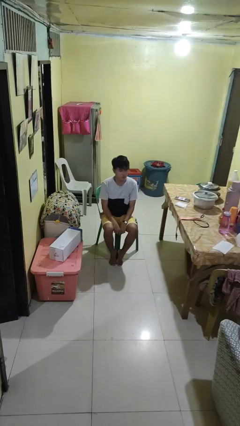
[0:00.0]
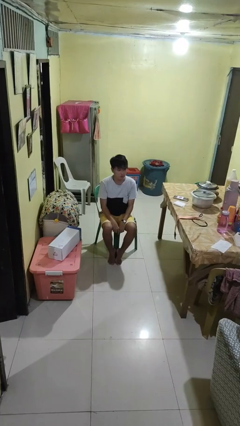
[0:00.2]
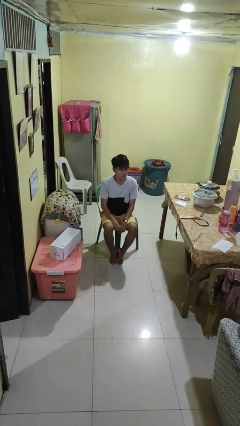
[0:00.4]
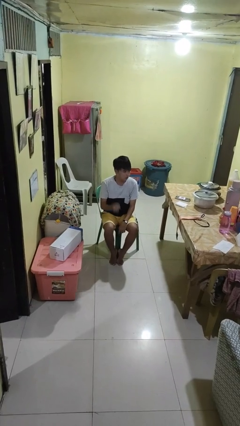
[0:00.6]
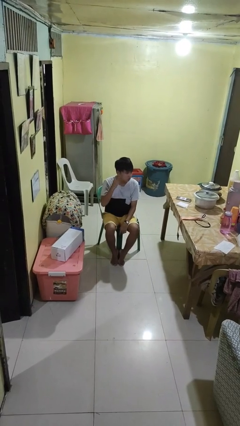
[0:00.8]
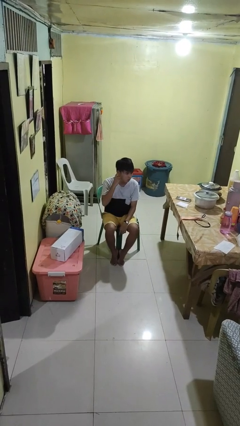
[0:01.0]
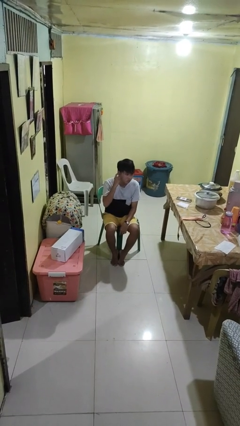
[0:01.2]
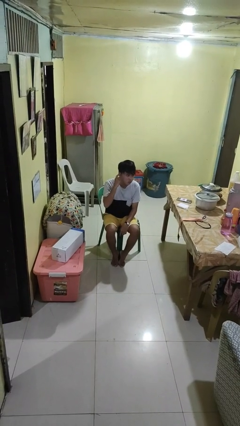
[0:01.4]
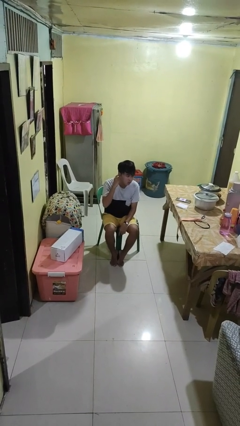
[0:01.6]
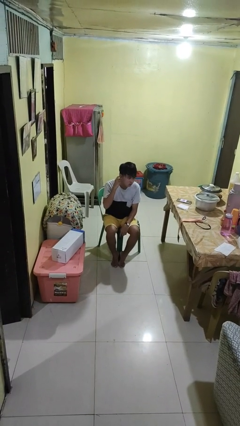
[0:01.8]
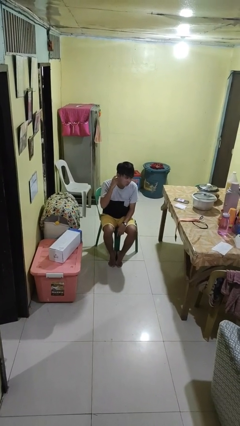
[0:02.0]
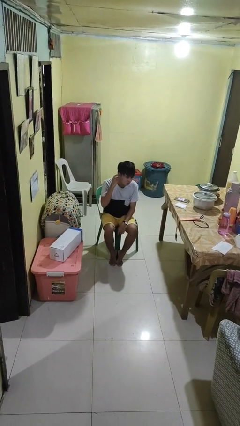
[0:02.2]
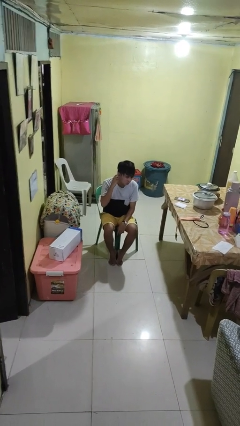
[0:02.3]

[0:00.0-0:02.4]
person gestures listen closely

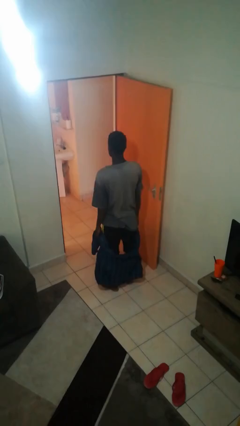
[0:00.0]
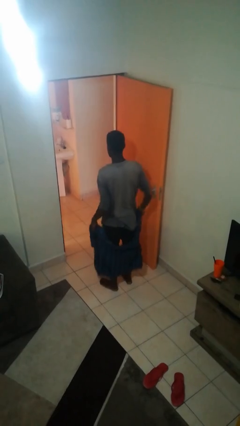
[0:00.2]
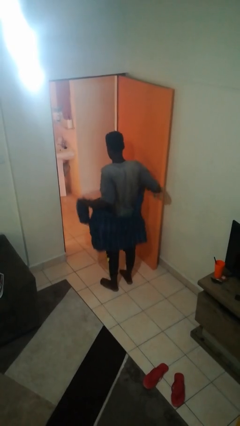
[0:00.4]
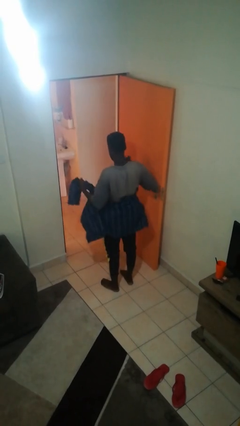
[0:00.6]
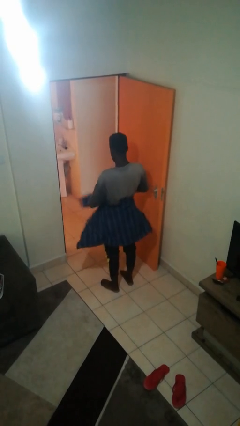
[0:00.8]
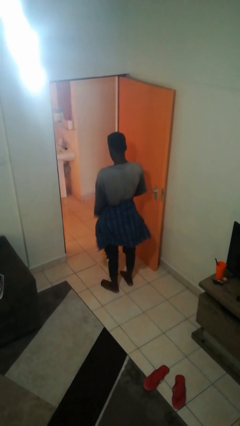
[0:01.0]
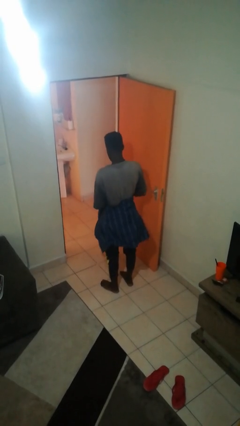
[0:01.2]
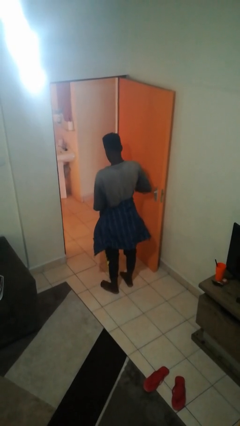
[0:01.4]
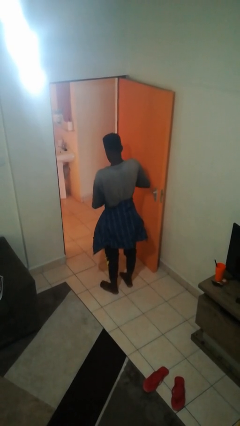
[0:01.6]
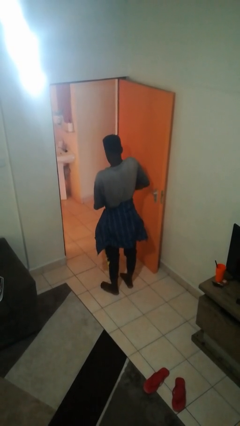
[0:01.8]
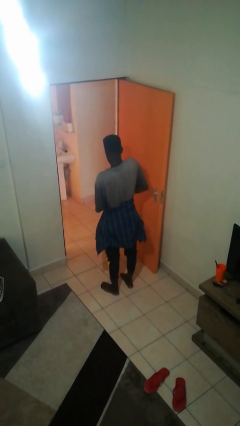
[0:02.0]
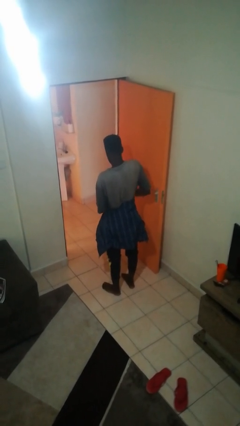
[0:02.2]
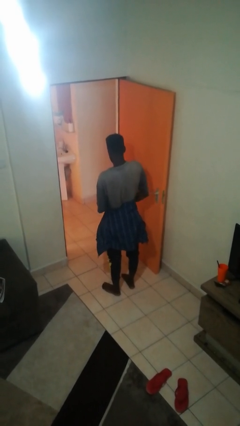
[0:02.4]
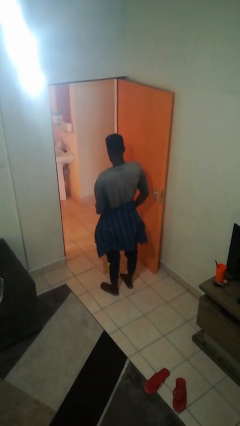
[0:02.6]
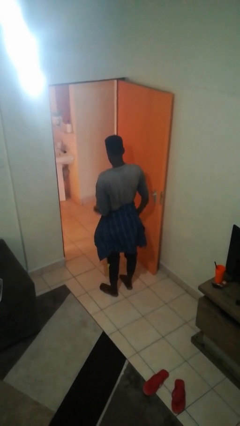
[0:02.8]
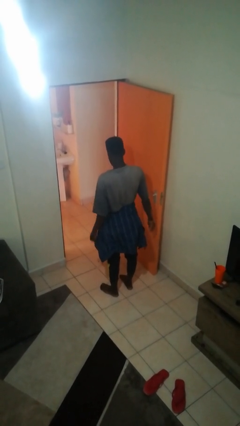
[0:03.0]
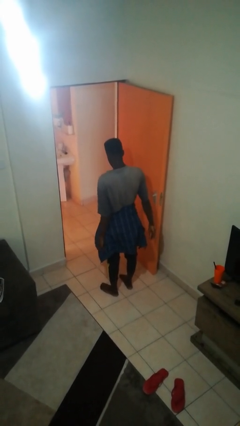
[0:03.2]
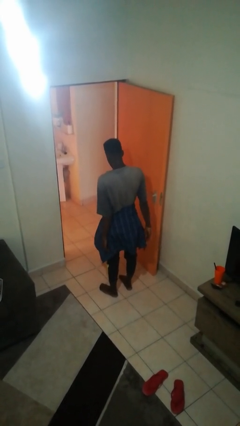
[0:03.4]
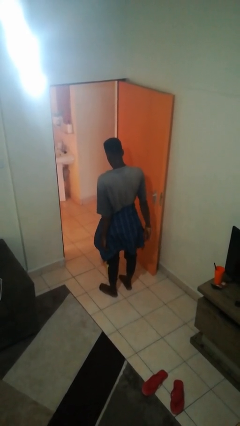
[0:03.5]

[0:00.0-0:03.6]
person ties jacket around waist

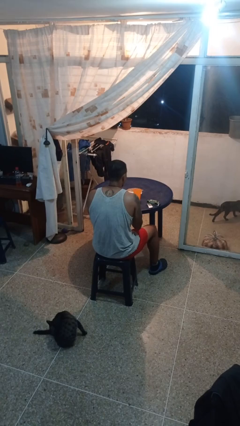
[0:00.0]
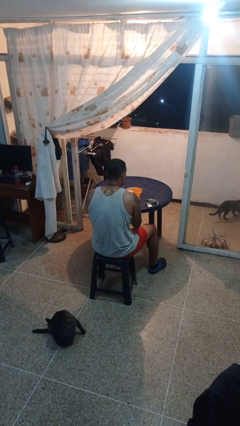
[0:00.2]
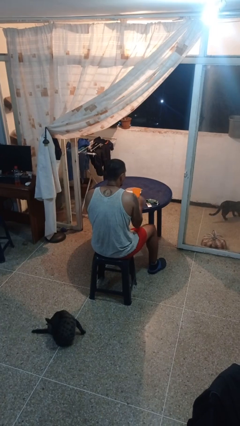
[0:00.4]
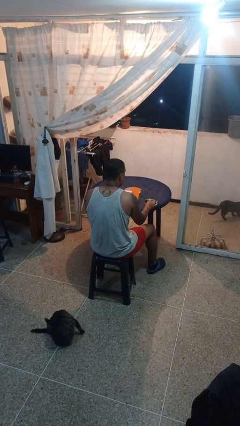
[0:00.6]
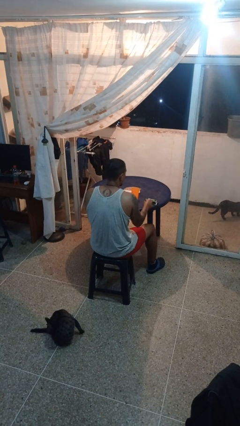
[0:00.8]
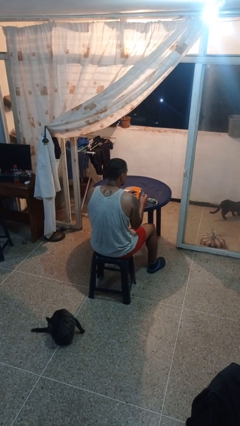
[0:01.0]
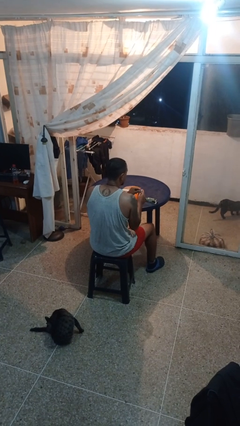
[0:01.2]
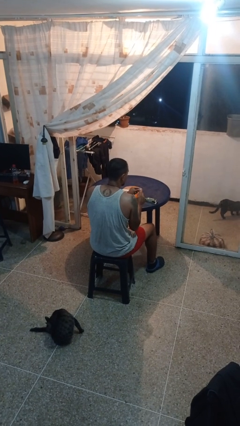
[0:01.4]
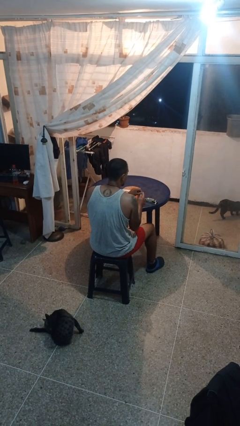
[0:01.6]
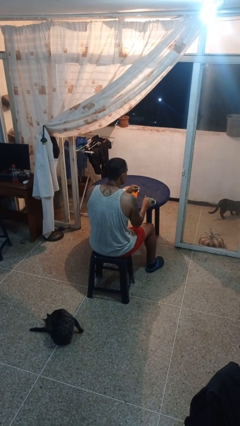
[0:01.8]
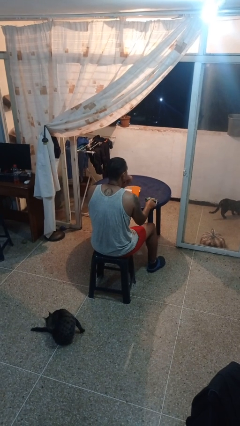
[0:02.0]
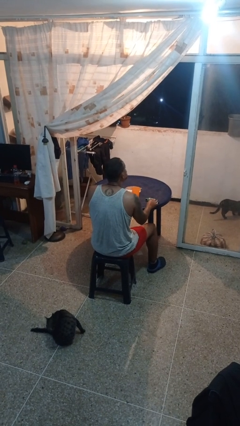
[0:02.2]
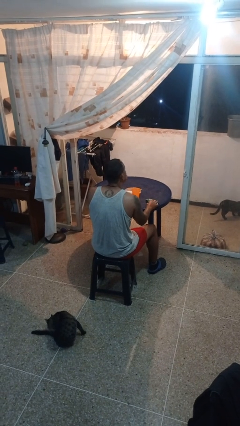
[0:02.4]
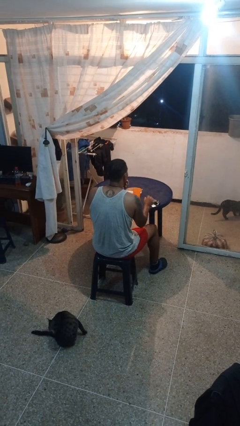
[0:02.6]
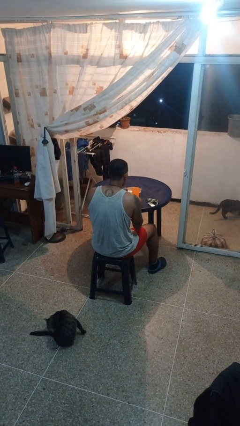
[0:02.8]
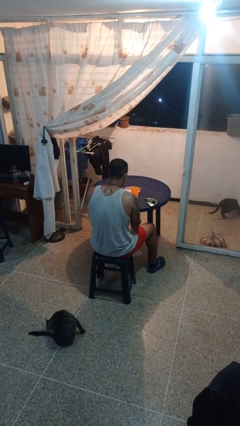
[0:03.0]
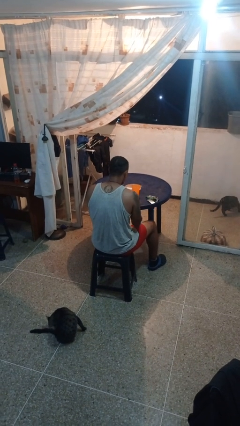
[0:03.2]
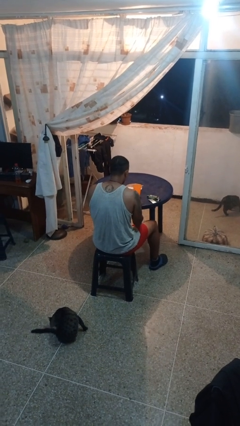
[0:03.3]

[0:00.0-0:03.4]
person takes medicine pills

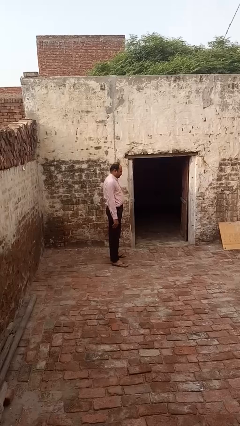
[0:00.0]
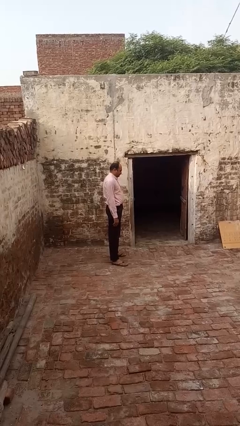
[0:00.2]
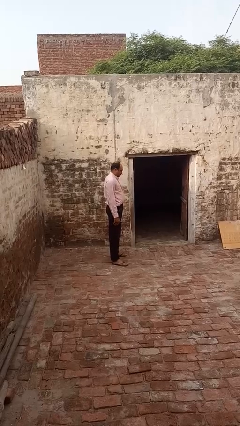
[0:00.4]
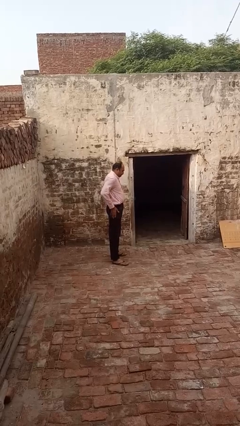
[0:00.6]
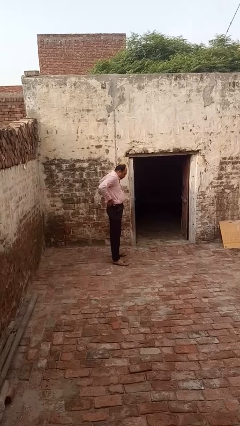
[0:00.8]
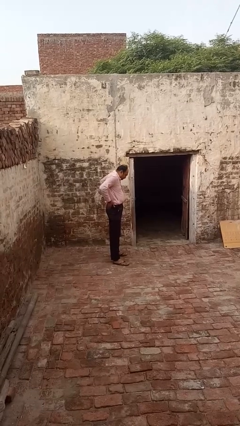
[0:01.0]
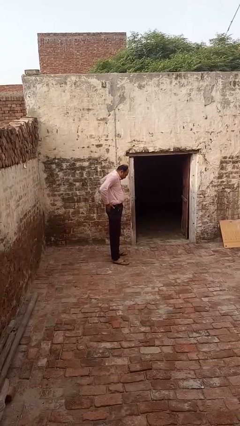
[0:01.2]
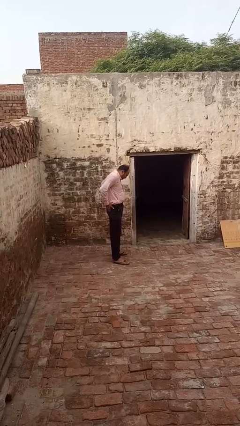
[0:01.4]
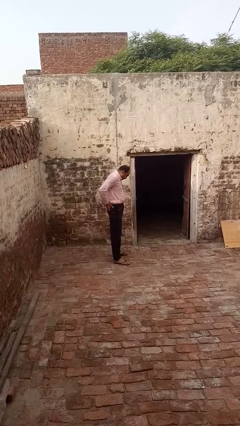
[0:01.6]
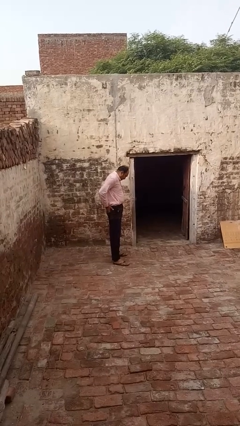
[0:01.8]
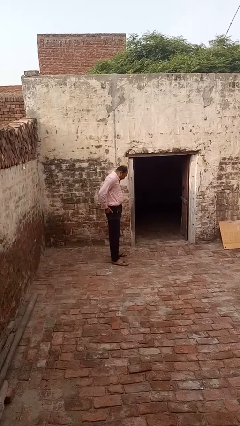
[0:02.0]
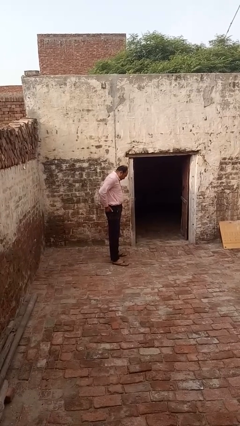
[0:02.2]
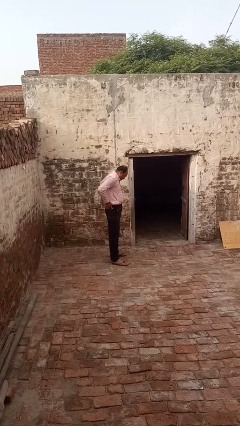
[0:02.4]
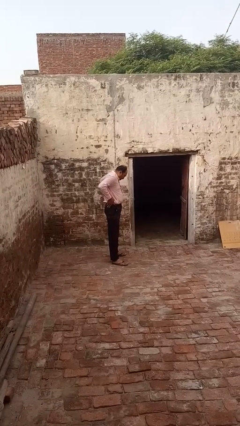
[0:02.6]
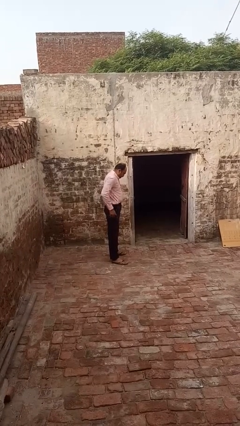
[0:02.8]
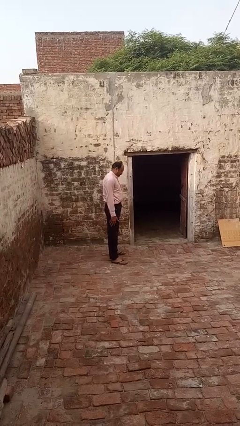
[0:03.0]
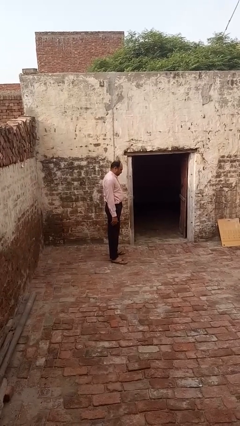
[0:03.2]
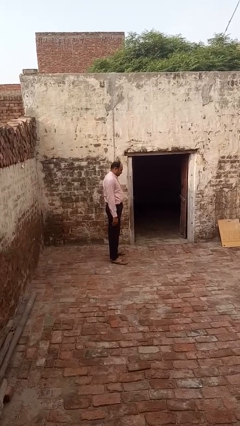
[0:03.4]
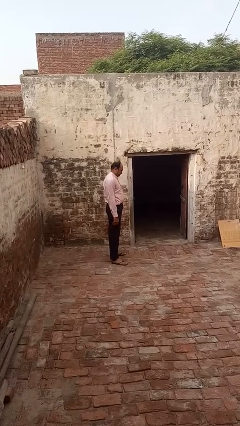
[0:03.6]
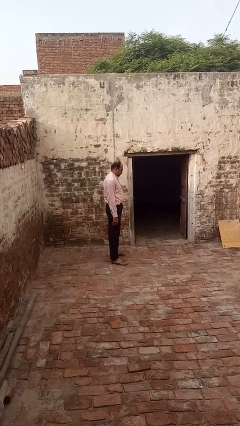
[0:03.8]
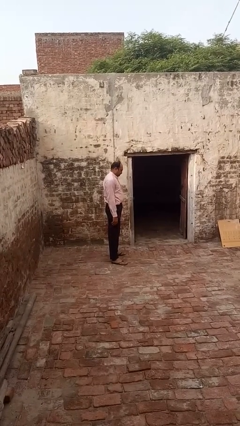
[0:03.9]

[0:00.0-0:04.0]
person puts hands in back pockets

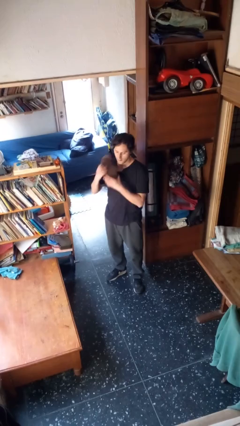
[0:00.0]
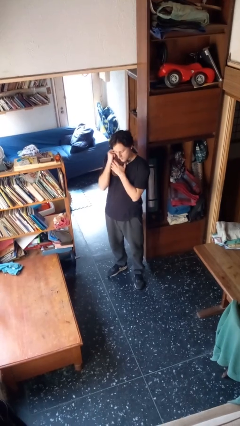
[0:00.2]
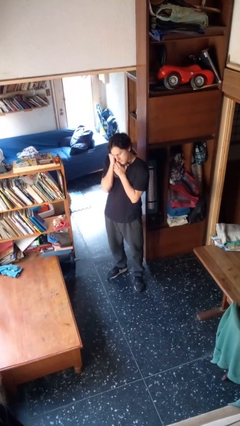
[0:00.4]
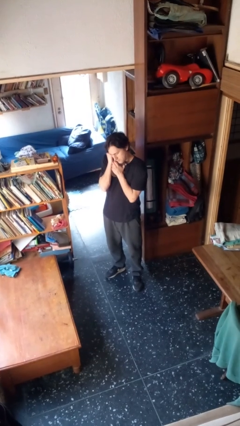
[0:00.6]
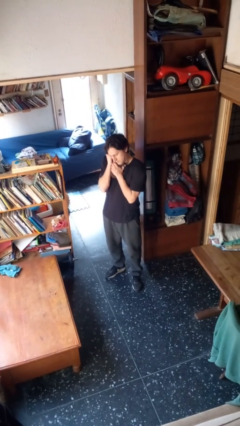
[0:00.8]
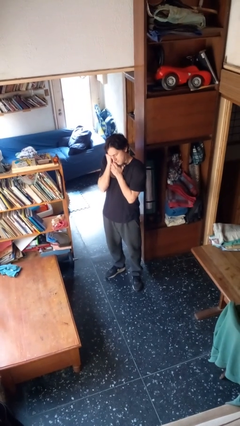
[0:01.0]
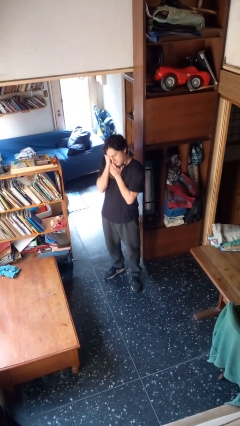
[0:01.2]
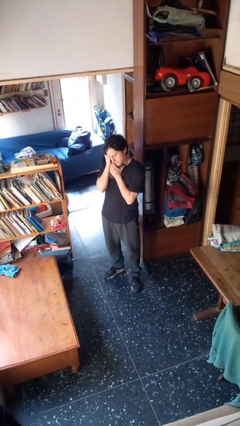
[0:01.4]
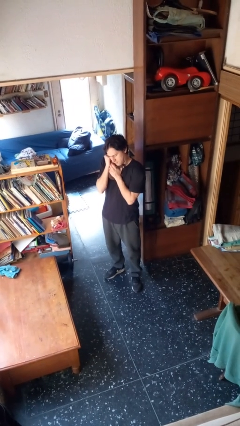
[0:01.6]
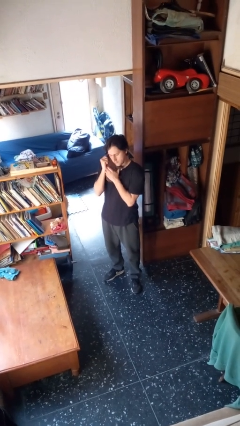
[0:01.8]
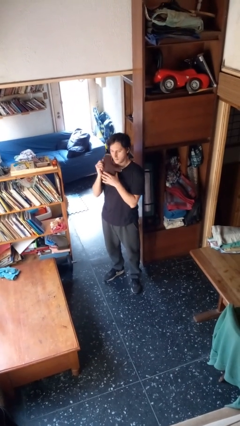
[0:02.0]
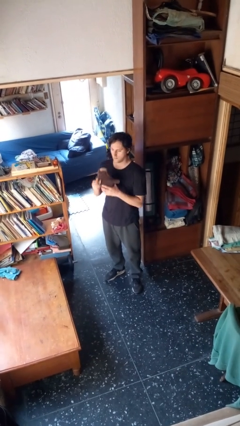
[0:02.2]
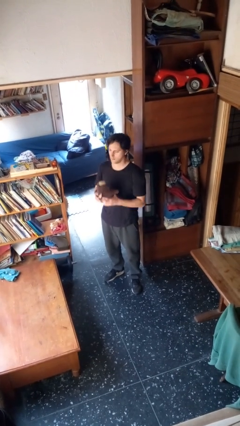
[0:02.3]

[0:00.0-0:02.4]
person hugs stuffed animal

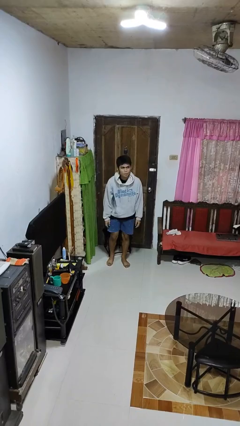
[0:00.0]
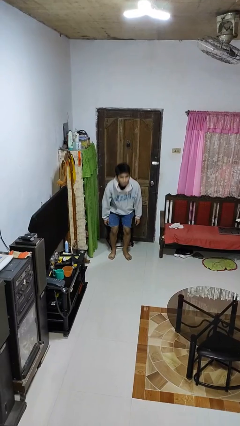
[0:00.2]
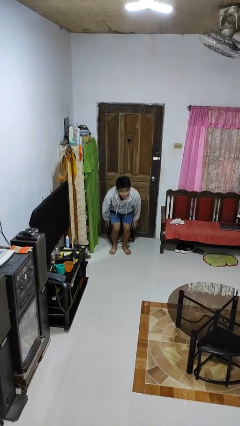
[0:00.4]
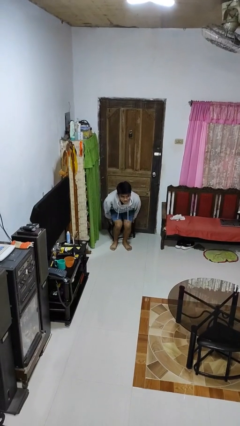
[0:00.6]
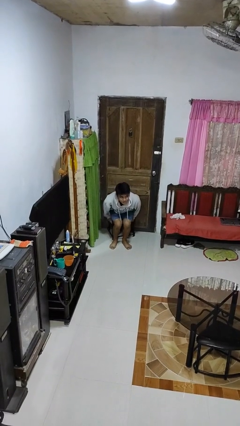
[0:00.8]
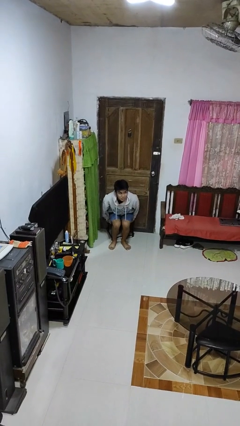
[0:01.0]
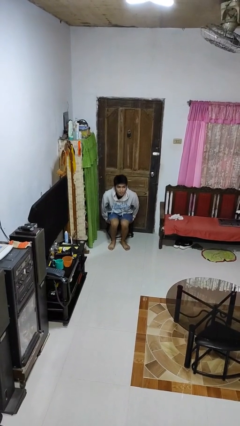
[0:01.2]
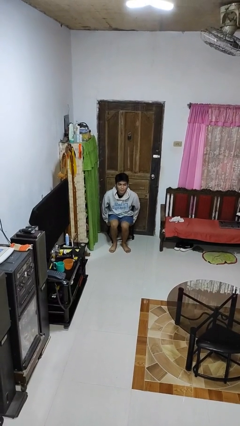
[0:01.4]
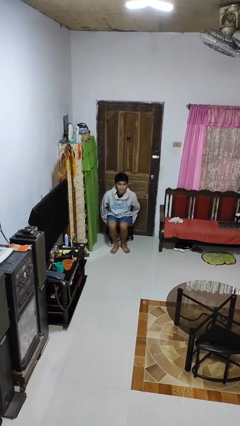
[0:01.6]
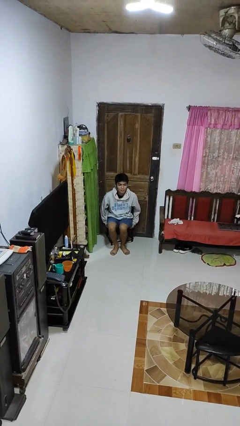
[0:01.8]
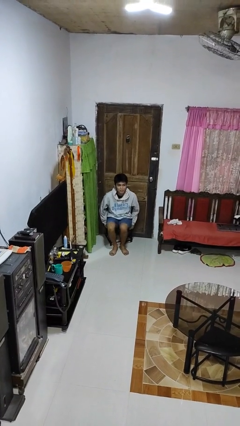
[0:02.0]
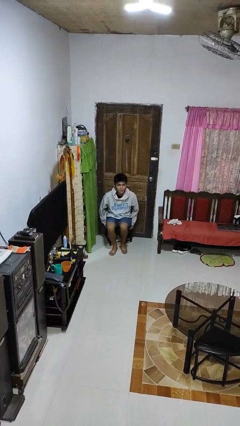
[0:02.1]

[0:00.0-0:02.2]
person sits down
